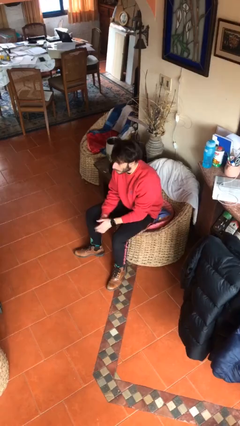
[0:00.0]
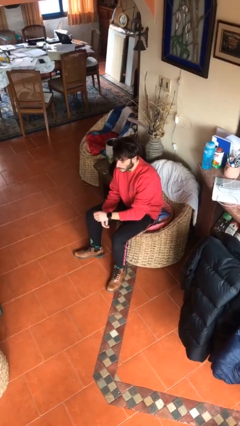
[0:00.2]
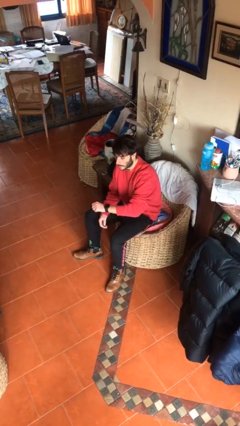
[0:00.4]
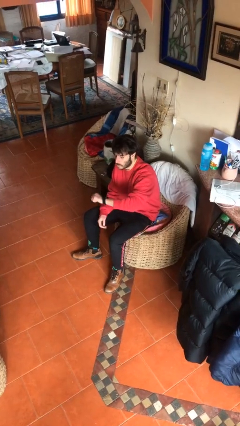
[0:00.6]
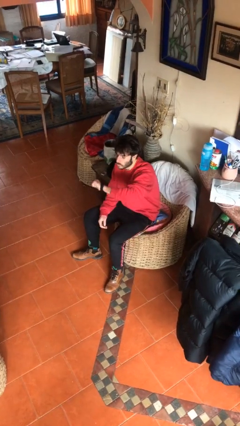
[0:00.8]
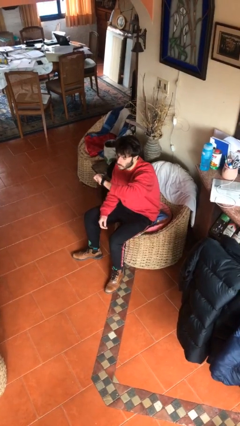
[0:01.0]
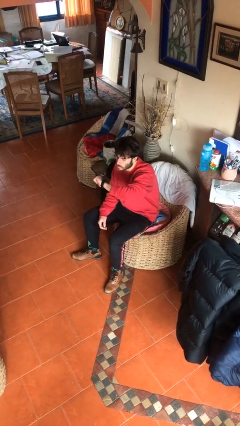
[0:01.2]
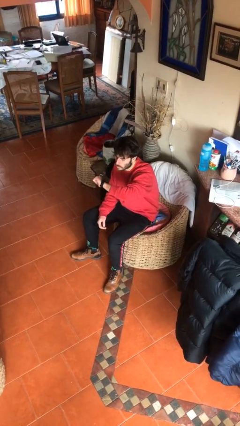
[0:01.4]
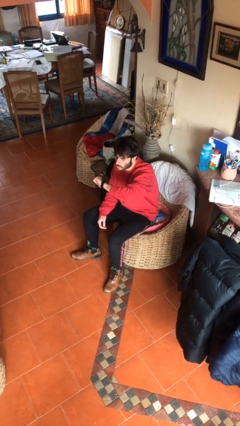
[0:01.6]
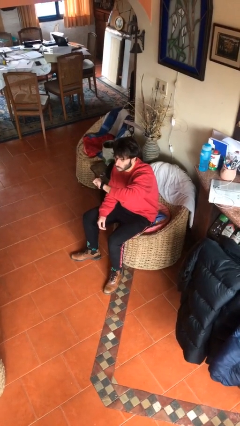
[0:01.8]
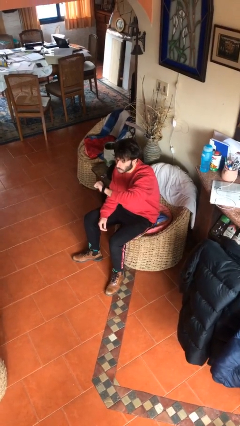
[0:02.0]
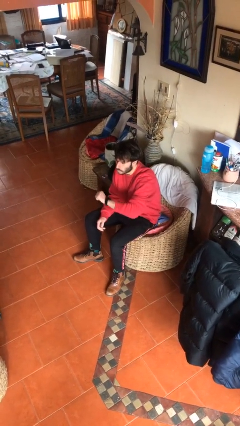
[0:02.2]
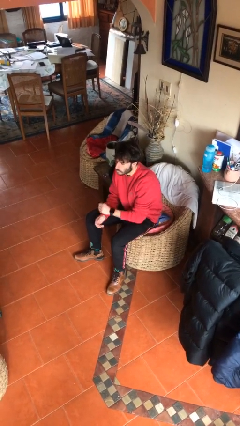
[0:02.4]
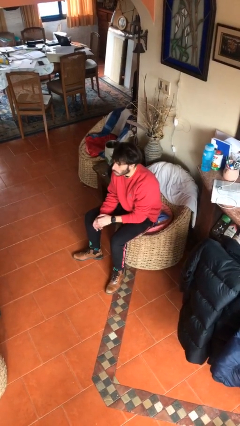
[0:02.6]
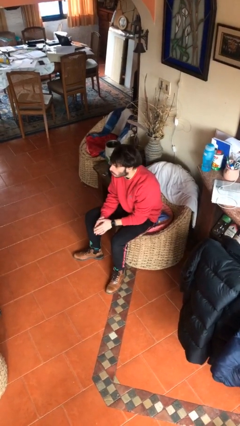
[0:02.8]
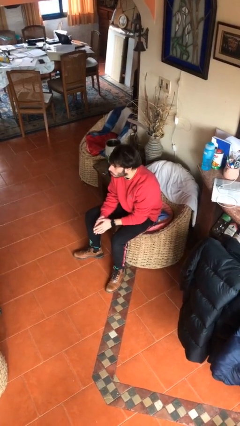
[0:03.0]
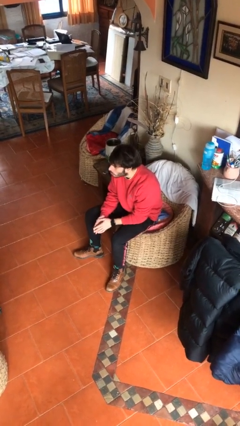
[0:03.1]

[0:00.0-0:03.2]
person looks at wristwatch

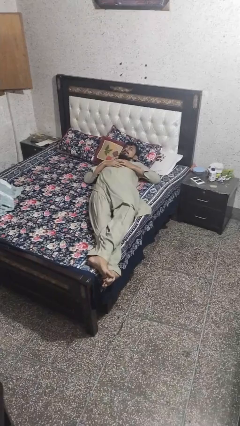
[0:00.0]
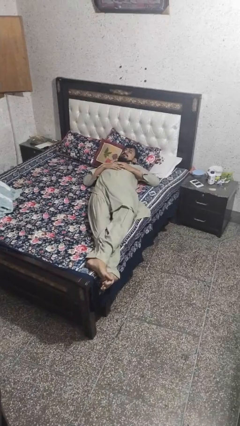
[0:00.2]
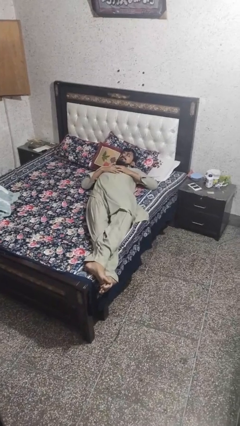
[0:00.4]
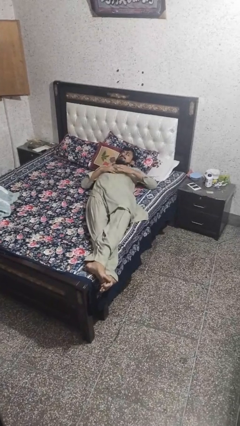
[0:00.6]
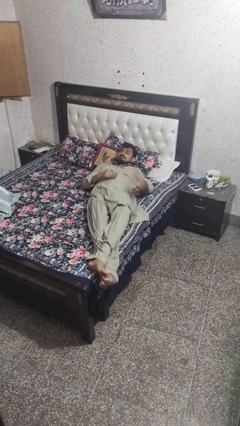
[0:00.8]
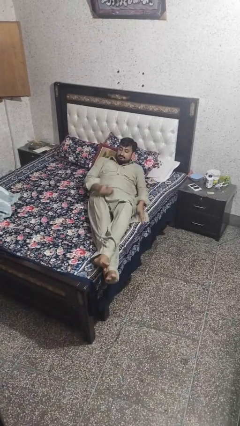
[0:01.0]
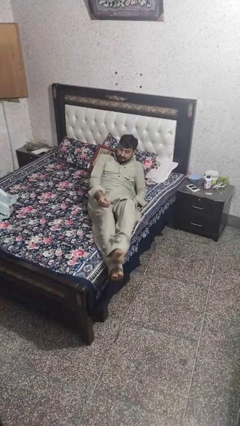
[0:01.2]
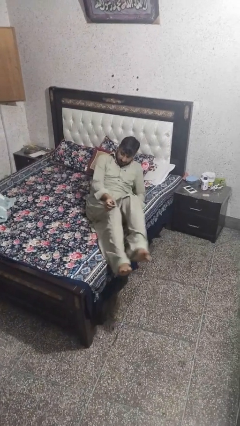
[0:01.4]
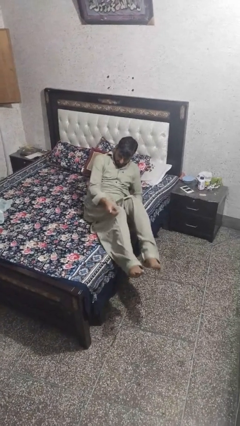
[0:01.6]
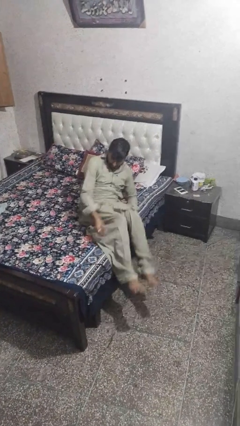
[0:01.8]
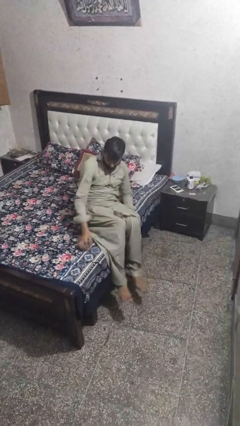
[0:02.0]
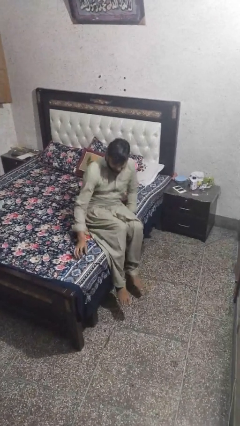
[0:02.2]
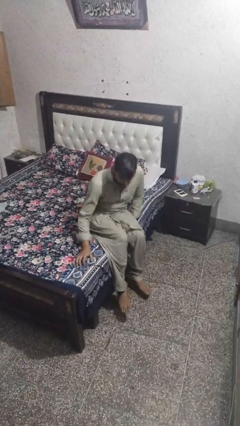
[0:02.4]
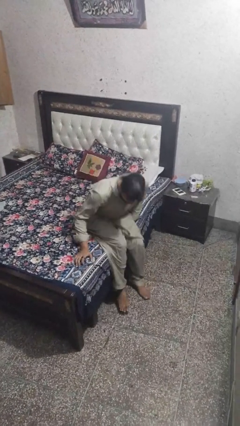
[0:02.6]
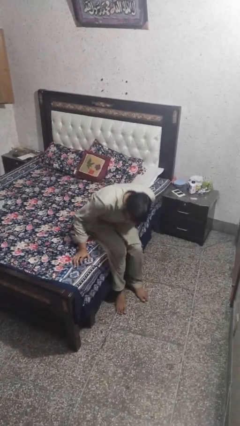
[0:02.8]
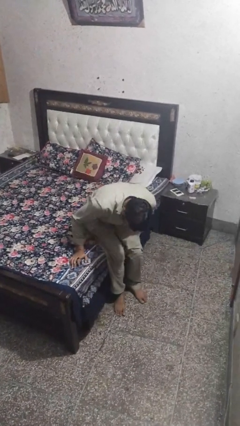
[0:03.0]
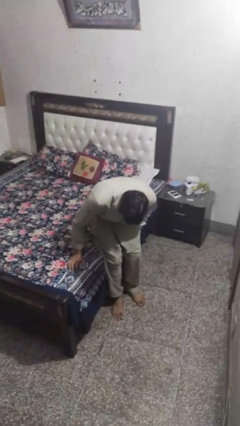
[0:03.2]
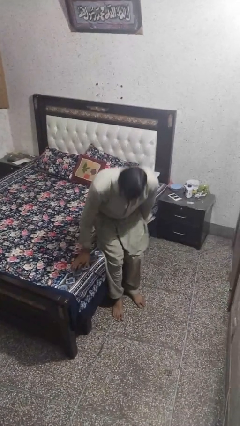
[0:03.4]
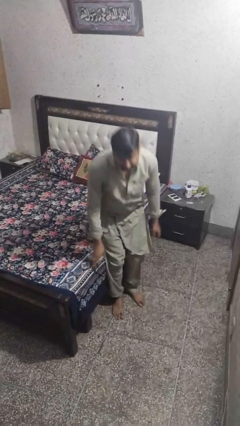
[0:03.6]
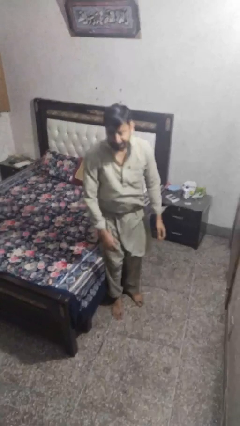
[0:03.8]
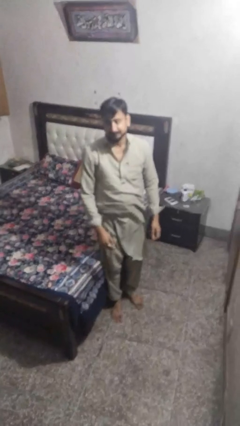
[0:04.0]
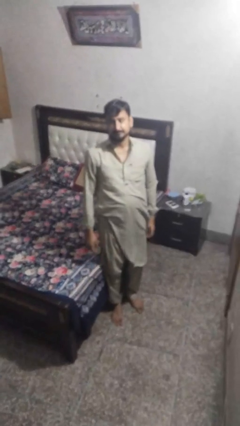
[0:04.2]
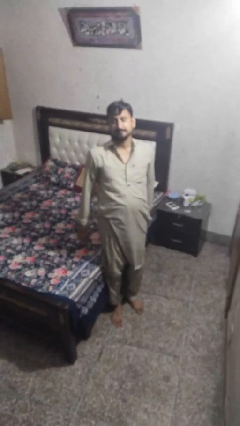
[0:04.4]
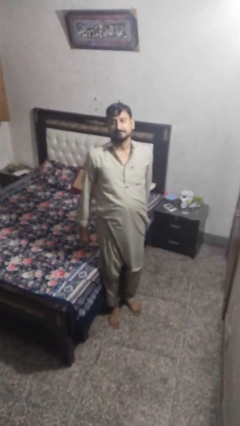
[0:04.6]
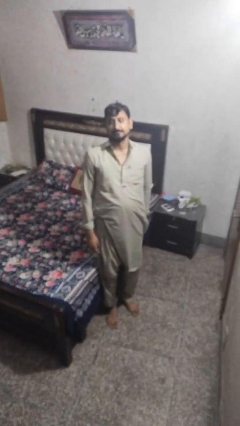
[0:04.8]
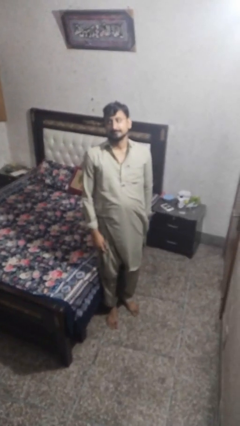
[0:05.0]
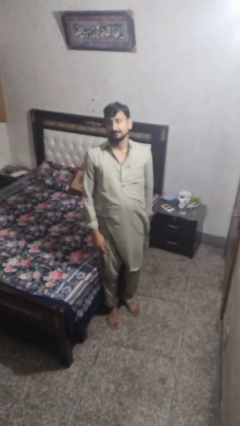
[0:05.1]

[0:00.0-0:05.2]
person stands up

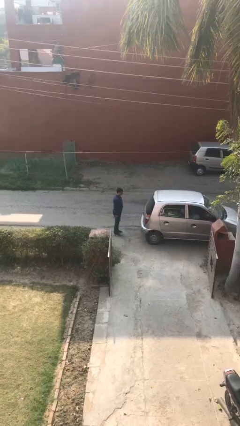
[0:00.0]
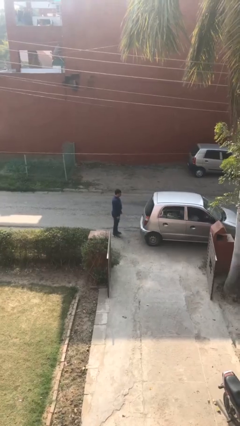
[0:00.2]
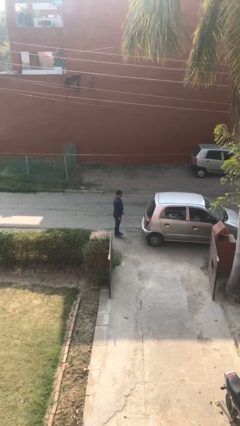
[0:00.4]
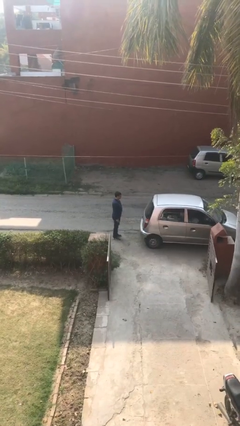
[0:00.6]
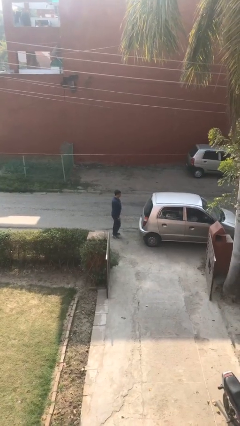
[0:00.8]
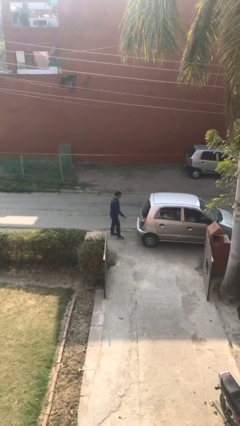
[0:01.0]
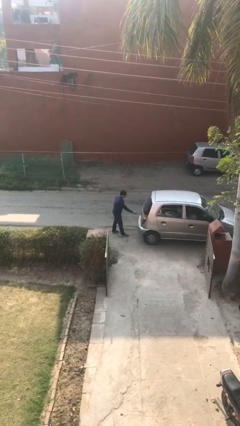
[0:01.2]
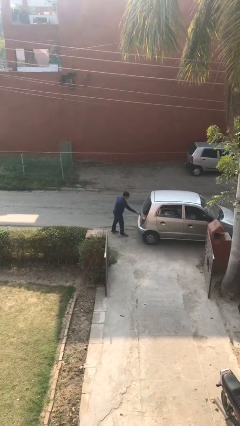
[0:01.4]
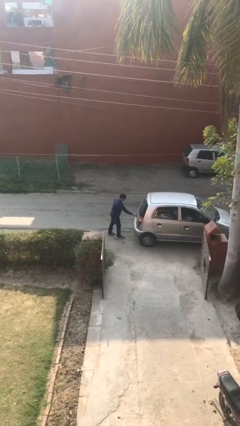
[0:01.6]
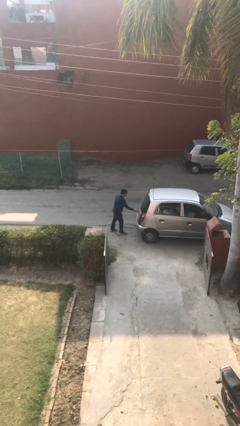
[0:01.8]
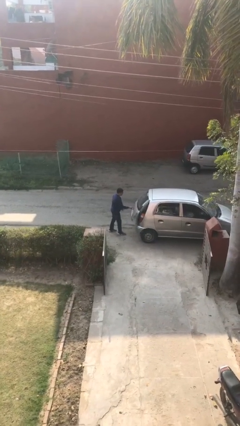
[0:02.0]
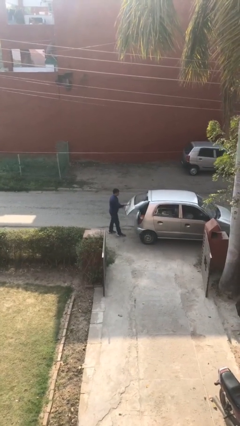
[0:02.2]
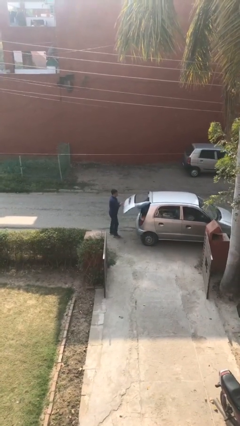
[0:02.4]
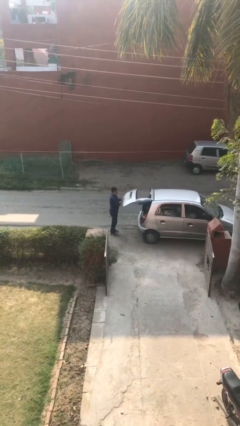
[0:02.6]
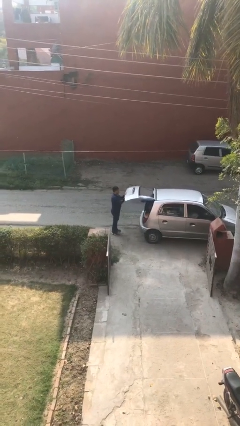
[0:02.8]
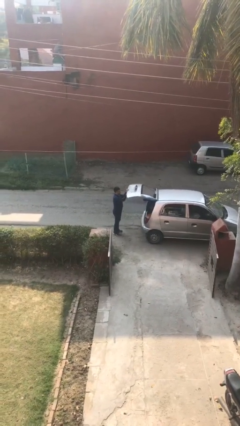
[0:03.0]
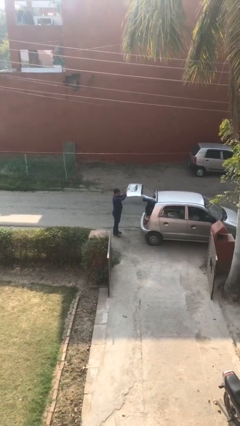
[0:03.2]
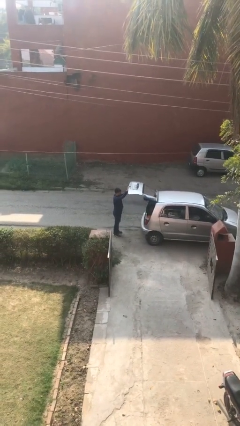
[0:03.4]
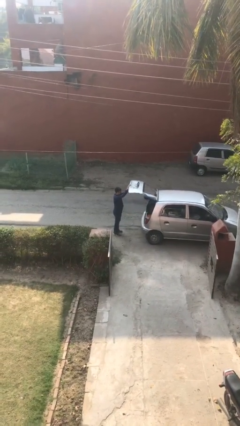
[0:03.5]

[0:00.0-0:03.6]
person opens car trunk

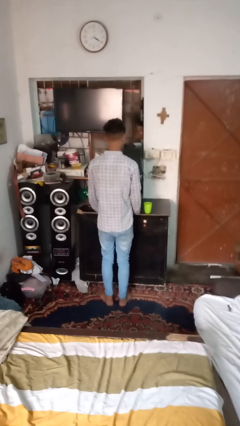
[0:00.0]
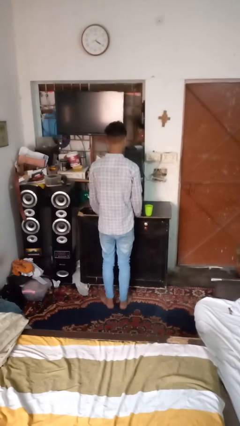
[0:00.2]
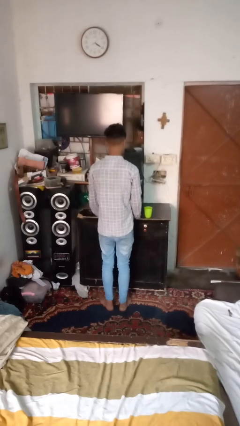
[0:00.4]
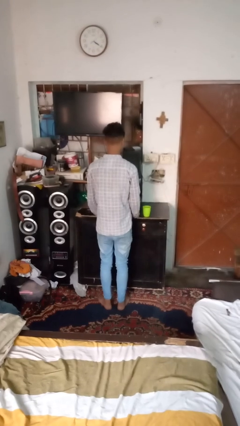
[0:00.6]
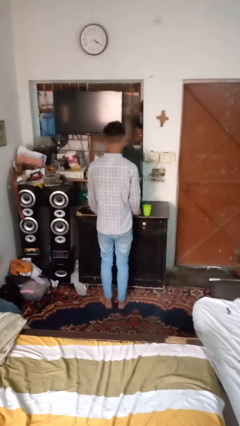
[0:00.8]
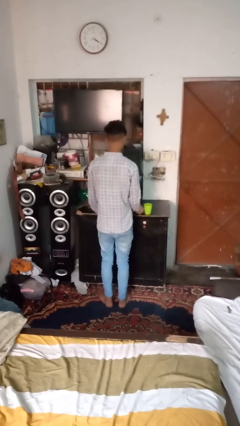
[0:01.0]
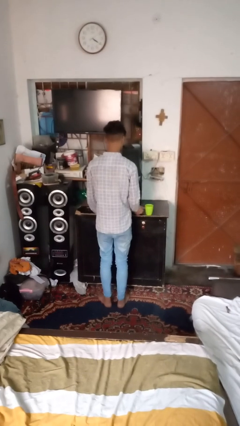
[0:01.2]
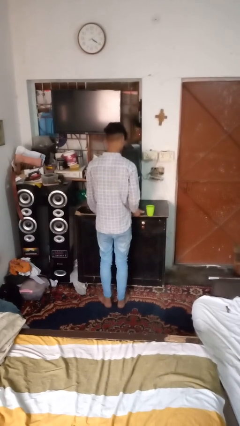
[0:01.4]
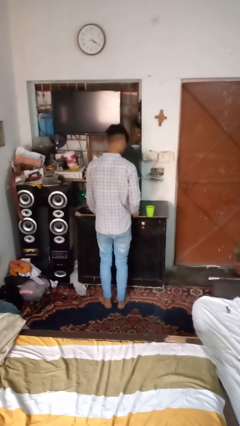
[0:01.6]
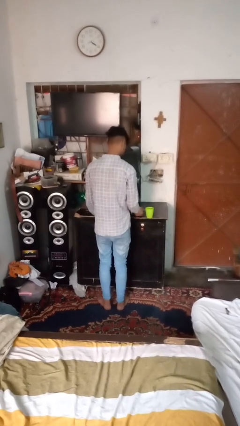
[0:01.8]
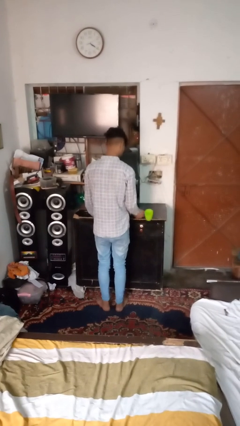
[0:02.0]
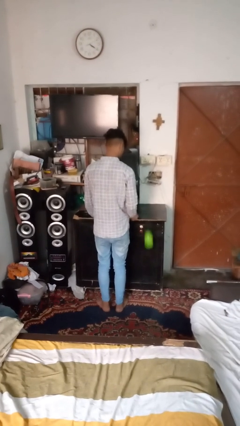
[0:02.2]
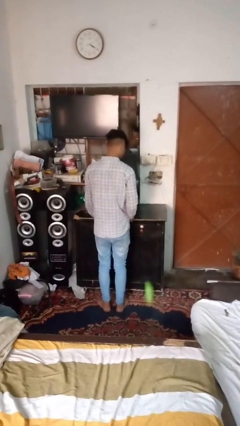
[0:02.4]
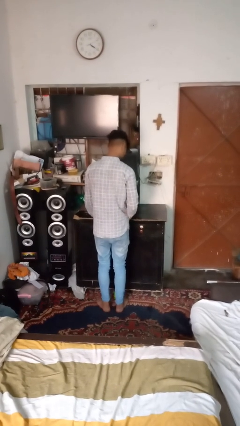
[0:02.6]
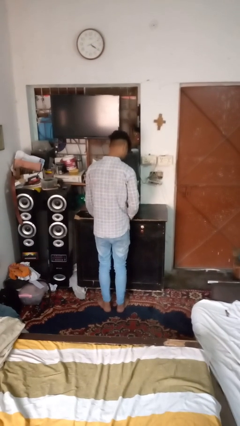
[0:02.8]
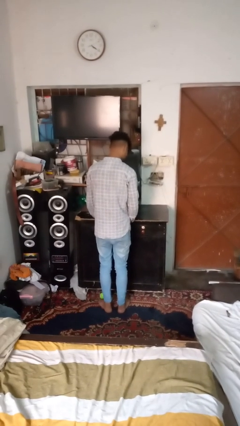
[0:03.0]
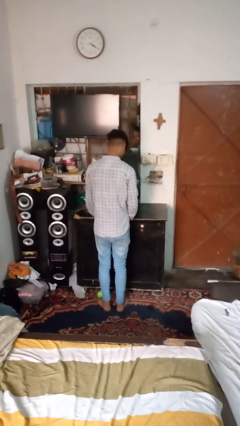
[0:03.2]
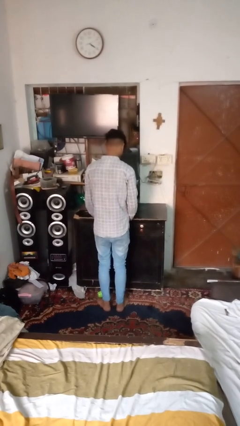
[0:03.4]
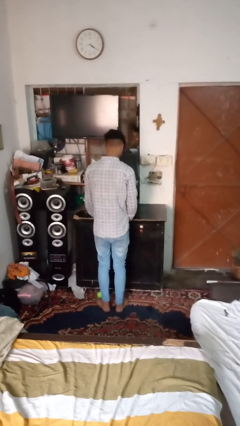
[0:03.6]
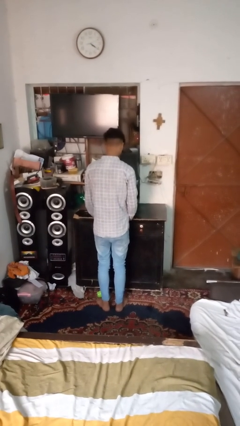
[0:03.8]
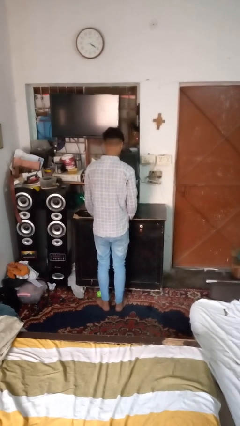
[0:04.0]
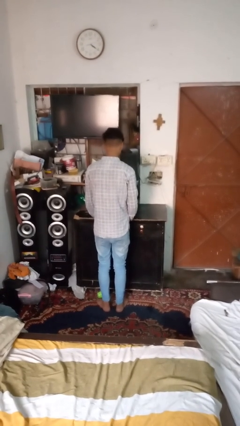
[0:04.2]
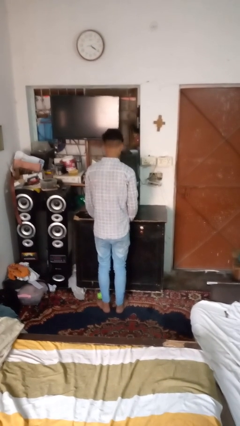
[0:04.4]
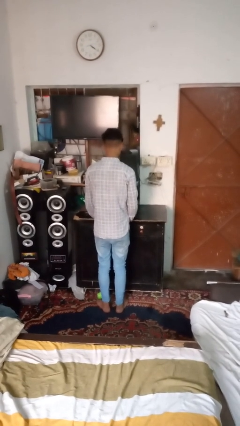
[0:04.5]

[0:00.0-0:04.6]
person spills on floor

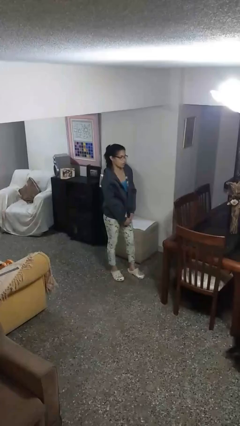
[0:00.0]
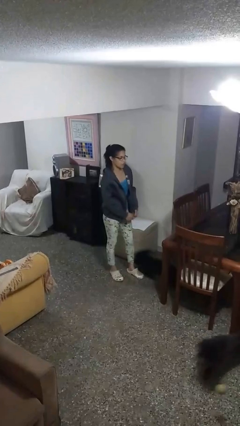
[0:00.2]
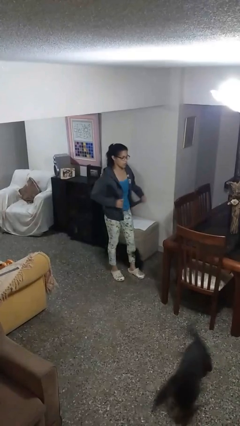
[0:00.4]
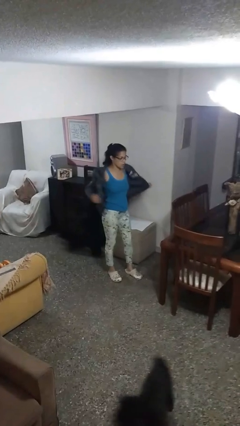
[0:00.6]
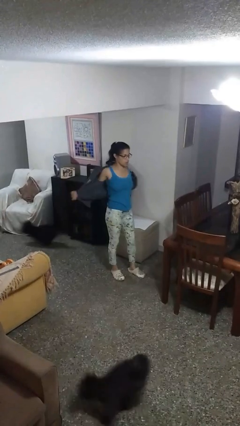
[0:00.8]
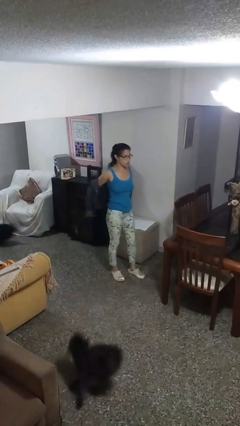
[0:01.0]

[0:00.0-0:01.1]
person unzips jacket
